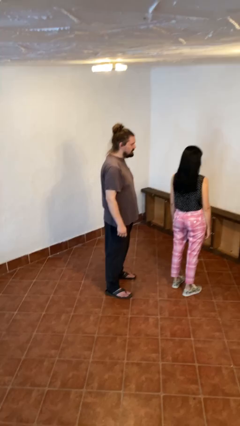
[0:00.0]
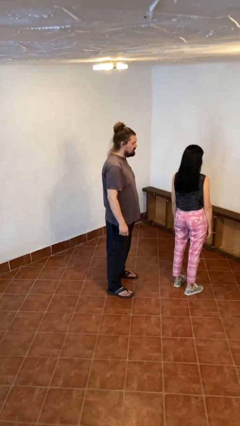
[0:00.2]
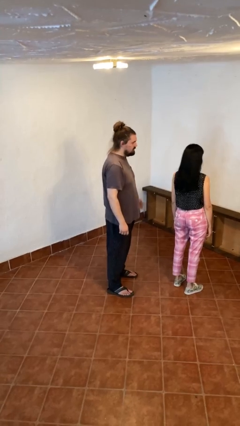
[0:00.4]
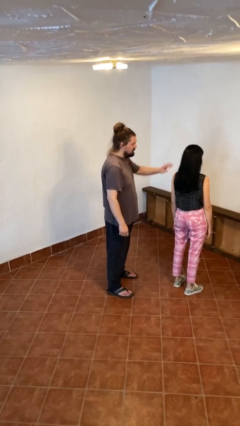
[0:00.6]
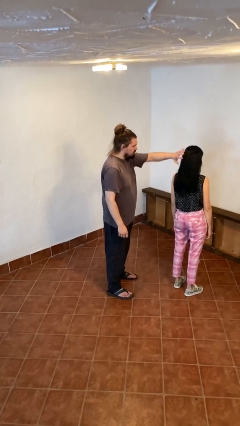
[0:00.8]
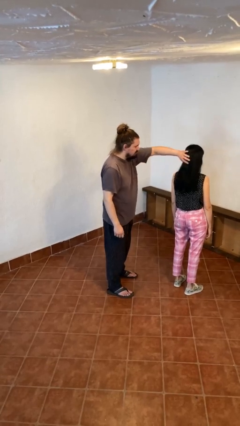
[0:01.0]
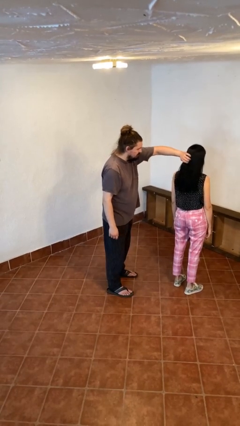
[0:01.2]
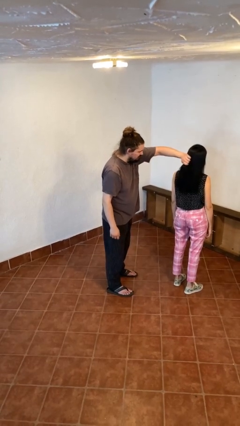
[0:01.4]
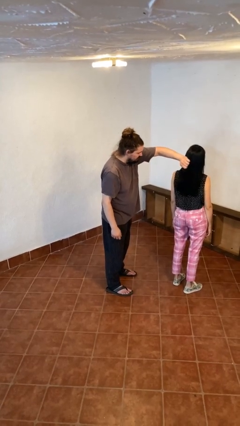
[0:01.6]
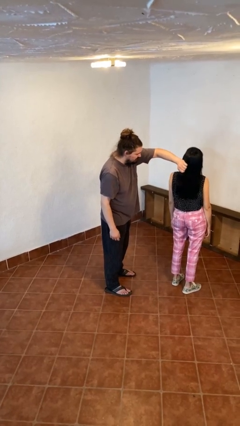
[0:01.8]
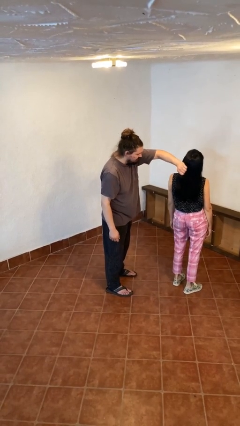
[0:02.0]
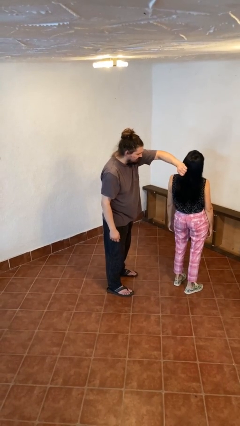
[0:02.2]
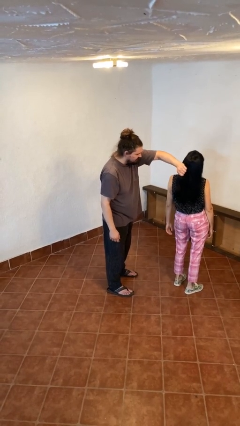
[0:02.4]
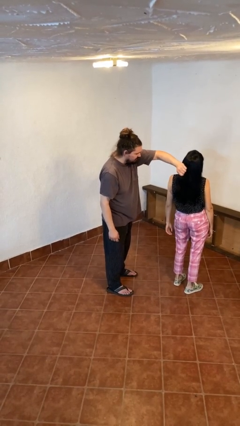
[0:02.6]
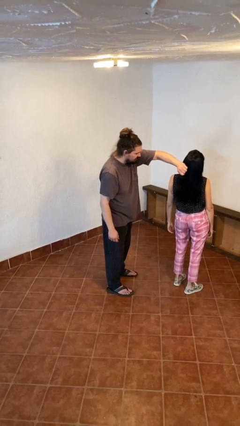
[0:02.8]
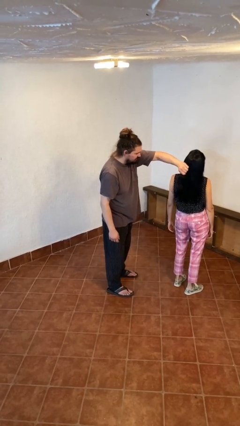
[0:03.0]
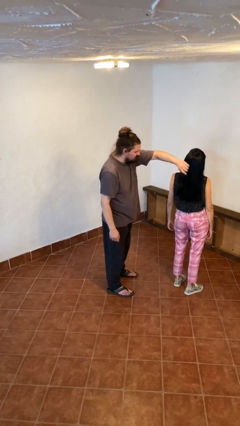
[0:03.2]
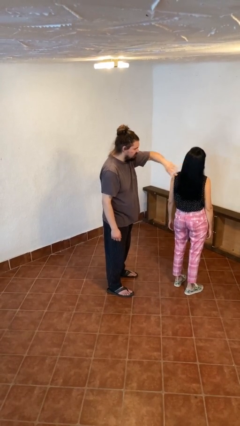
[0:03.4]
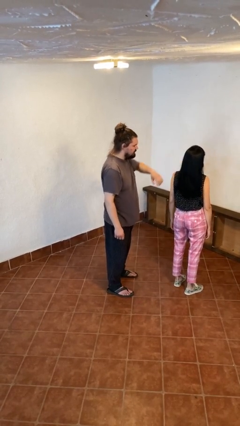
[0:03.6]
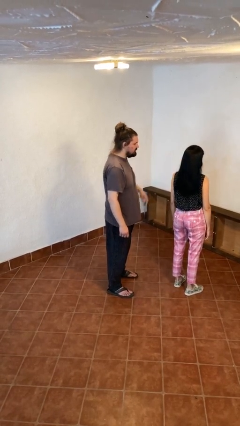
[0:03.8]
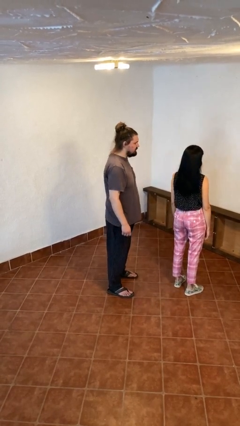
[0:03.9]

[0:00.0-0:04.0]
person grabs person by hair

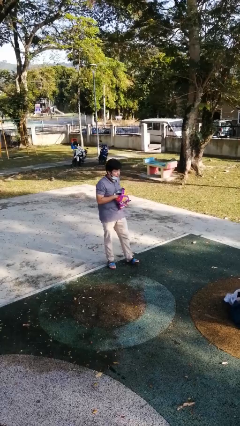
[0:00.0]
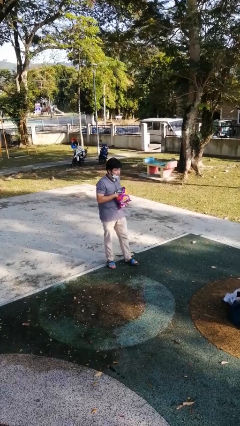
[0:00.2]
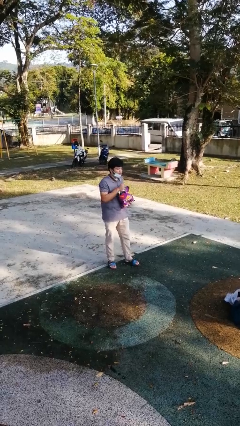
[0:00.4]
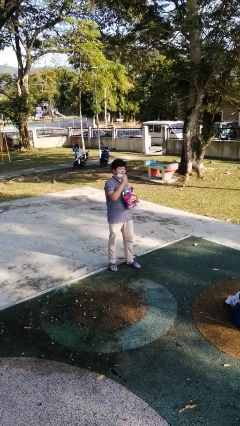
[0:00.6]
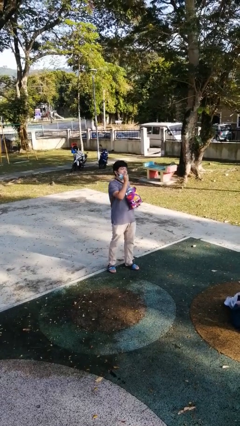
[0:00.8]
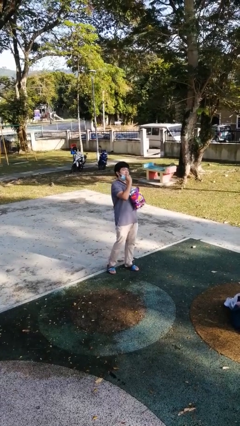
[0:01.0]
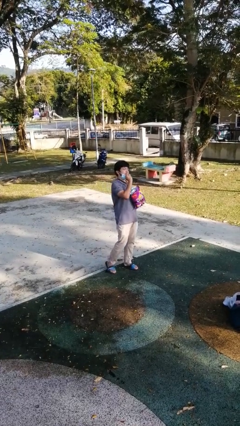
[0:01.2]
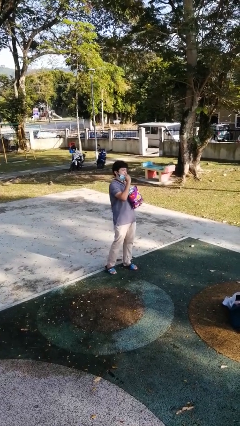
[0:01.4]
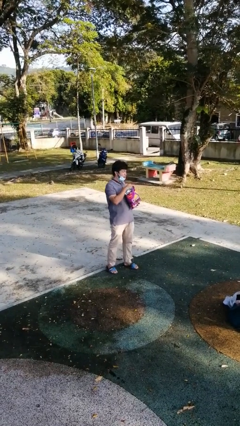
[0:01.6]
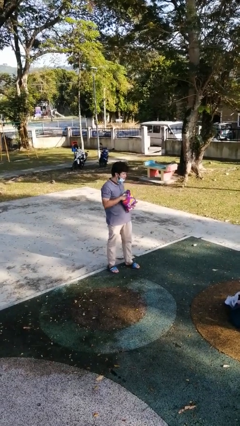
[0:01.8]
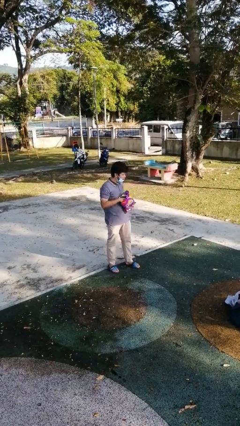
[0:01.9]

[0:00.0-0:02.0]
person eats snack from bag

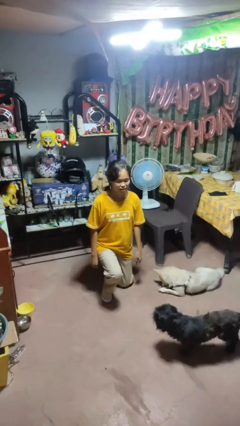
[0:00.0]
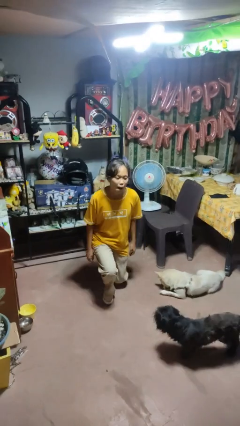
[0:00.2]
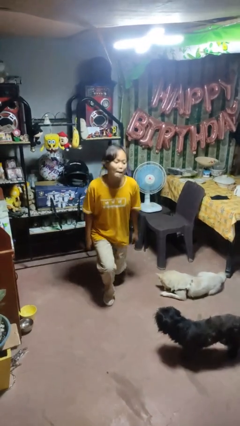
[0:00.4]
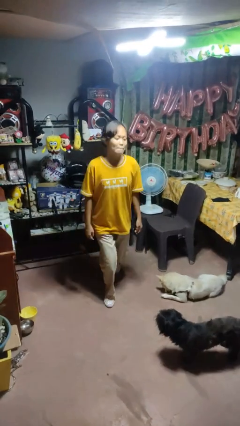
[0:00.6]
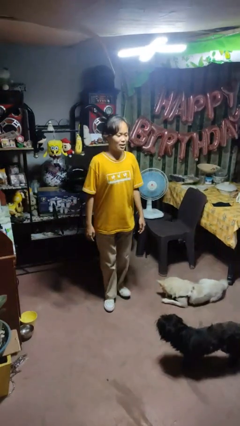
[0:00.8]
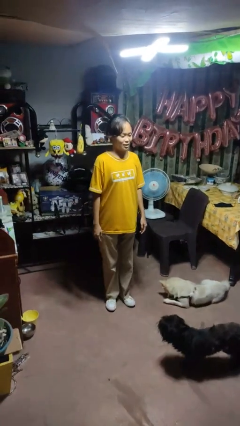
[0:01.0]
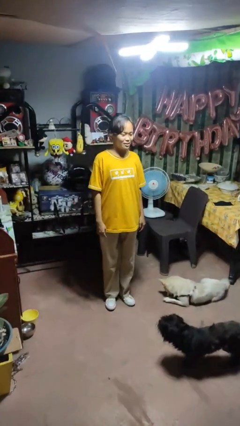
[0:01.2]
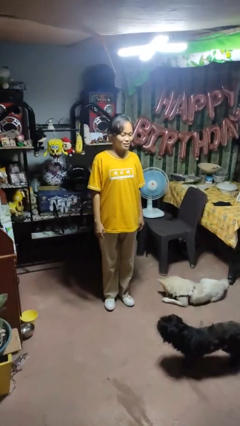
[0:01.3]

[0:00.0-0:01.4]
person stands up from floor

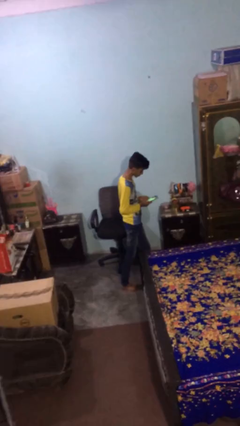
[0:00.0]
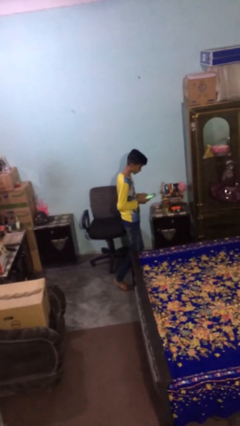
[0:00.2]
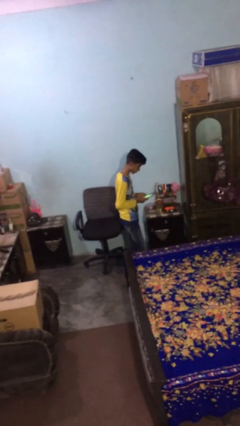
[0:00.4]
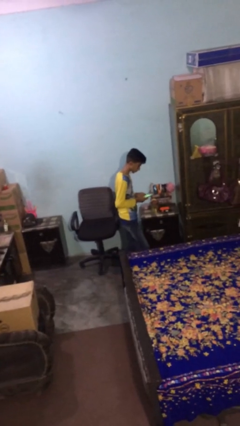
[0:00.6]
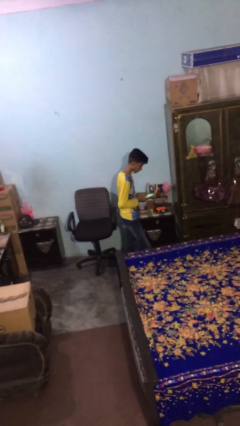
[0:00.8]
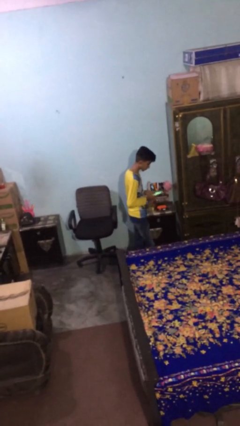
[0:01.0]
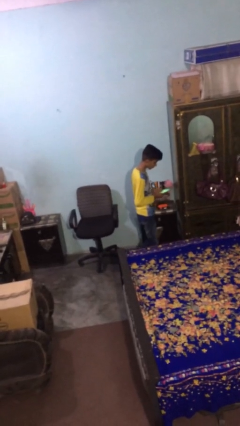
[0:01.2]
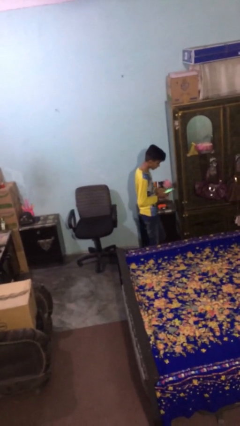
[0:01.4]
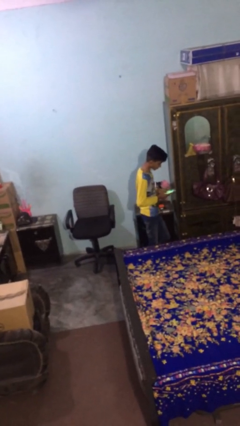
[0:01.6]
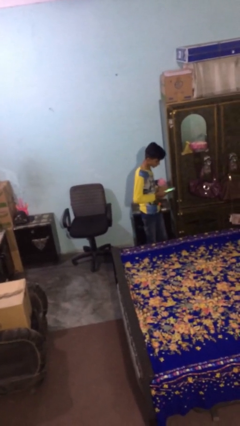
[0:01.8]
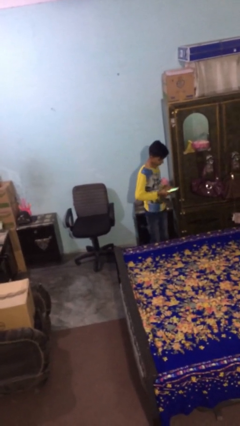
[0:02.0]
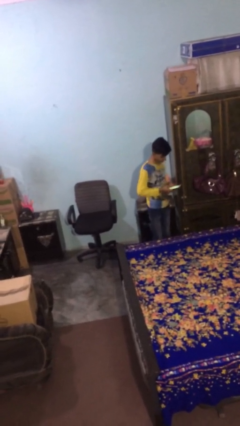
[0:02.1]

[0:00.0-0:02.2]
person talks on phone

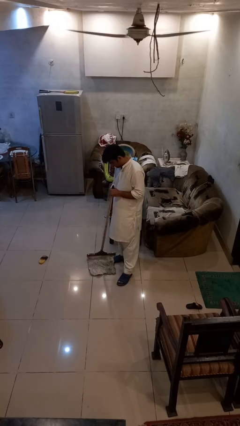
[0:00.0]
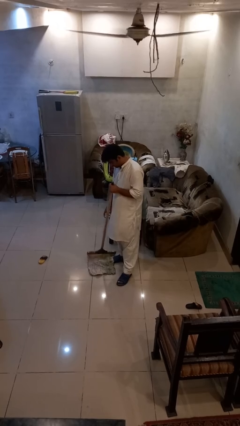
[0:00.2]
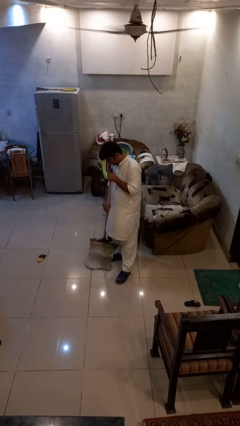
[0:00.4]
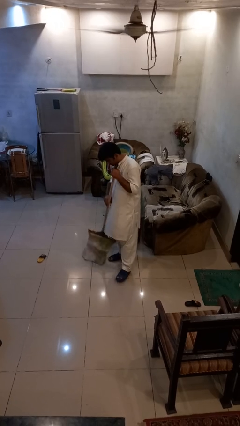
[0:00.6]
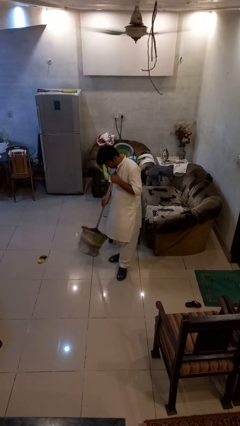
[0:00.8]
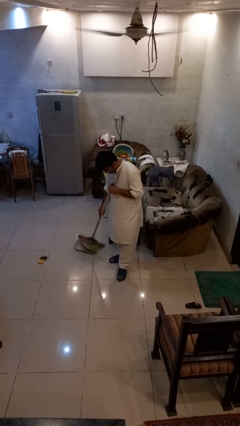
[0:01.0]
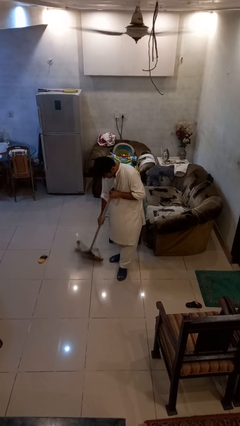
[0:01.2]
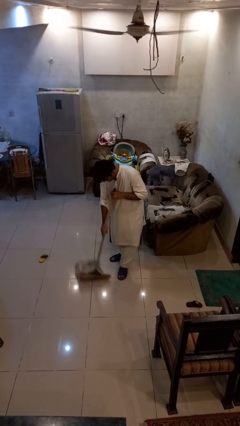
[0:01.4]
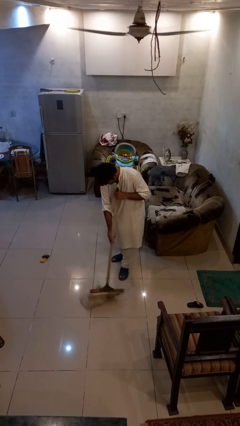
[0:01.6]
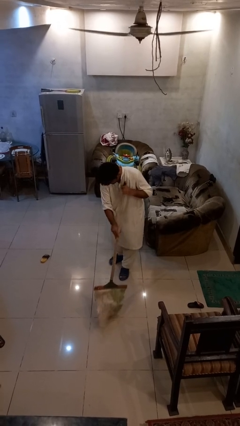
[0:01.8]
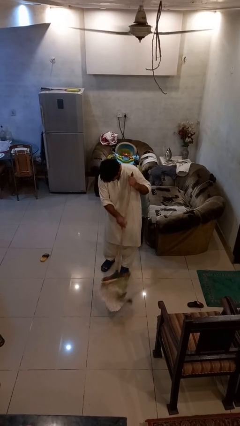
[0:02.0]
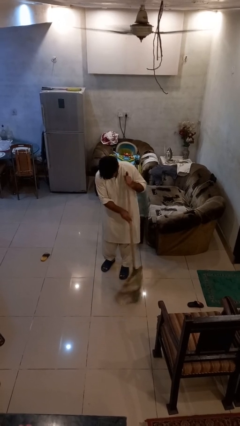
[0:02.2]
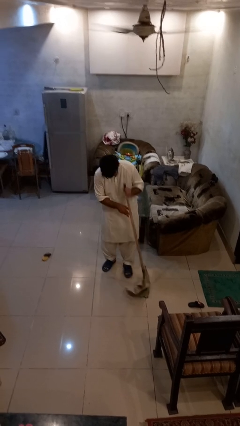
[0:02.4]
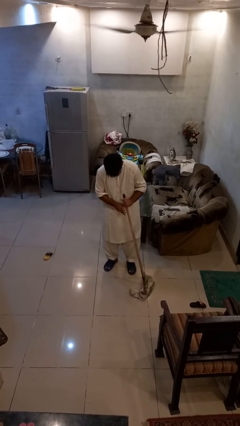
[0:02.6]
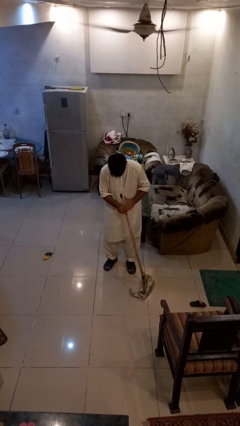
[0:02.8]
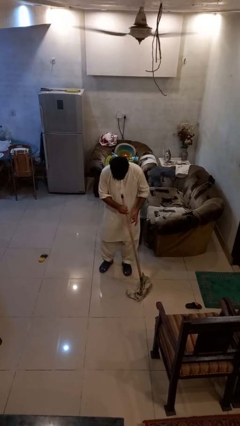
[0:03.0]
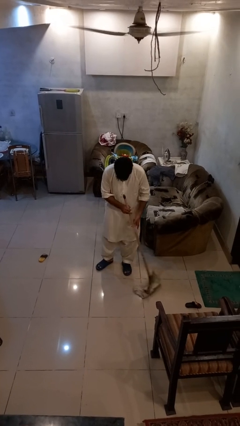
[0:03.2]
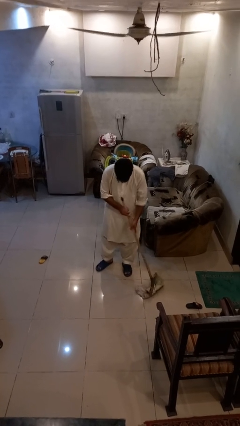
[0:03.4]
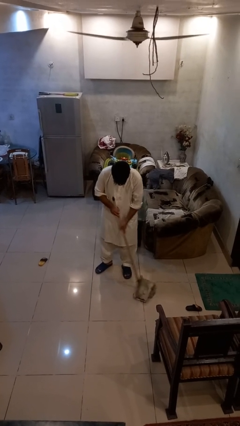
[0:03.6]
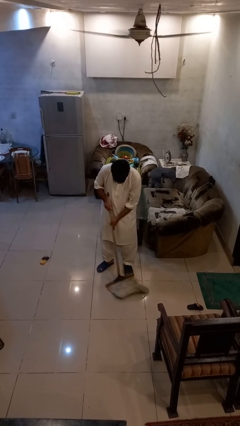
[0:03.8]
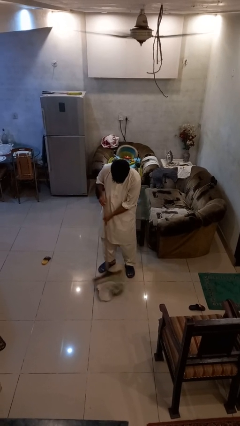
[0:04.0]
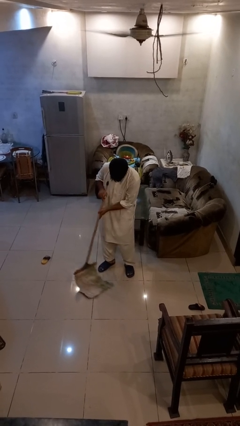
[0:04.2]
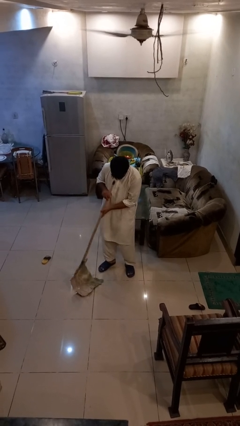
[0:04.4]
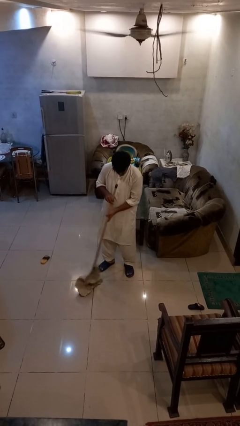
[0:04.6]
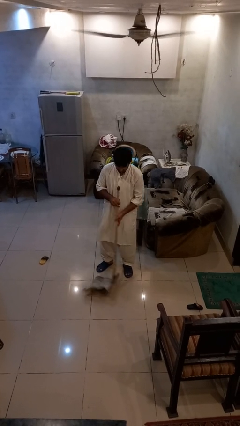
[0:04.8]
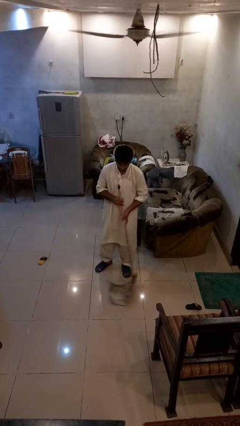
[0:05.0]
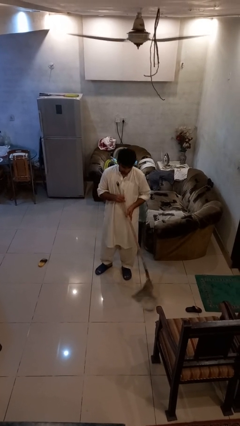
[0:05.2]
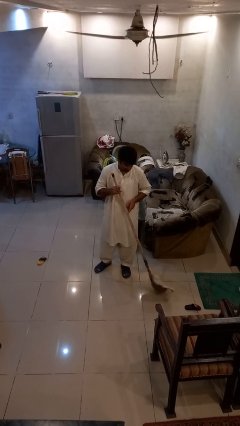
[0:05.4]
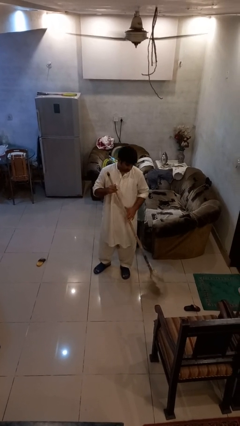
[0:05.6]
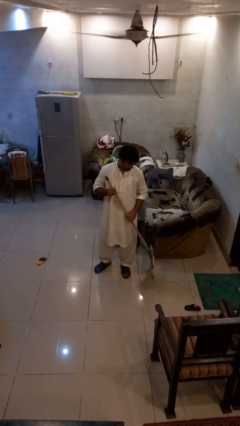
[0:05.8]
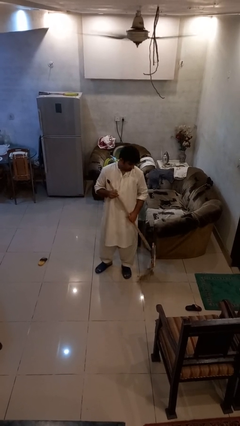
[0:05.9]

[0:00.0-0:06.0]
person mops

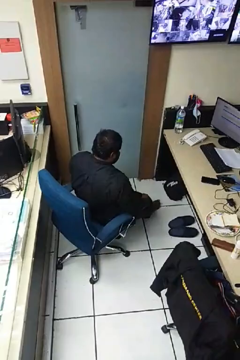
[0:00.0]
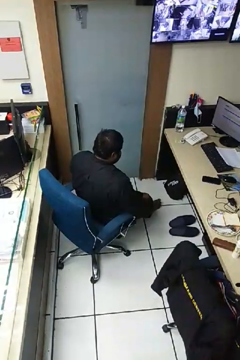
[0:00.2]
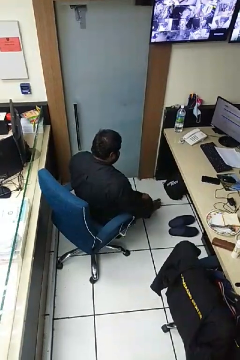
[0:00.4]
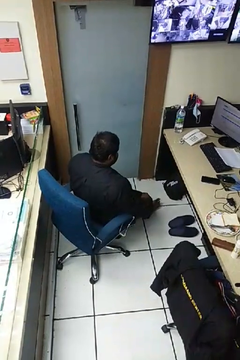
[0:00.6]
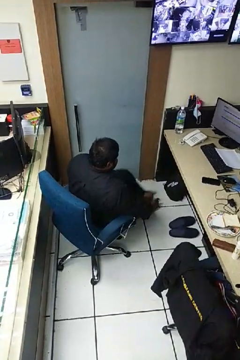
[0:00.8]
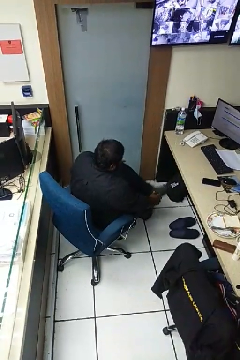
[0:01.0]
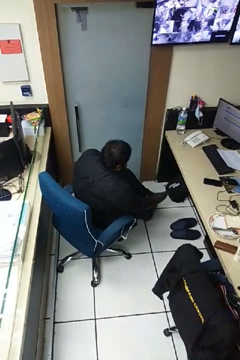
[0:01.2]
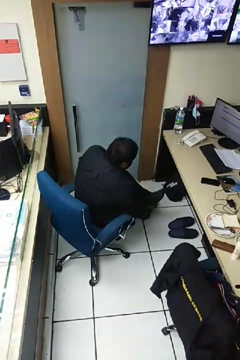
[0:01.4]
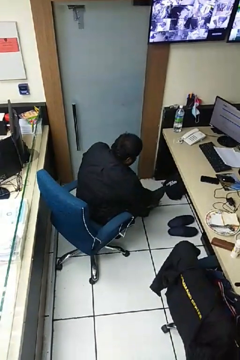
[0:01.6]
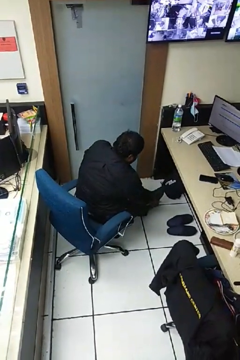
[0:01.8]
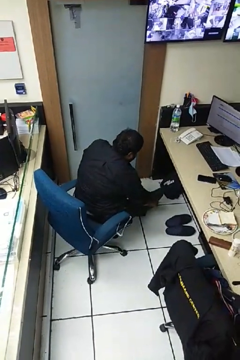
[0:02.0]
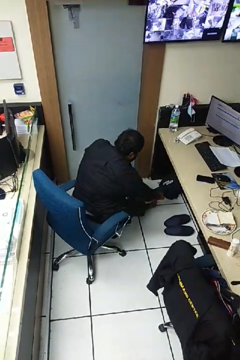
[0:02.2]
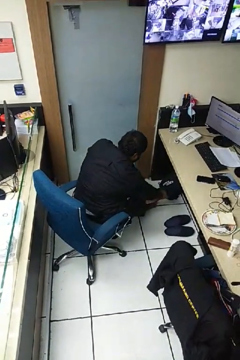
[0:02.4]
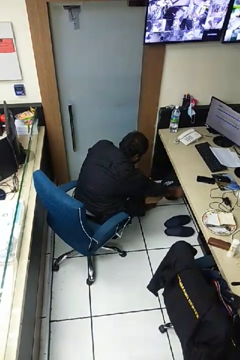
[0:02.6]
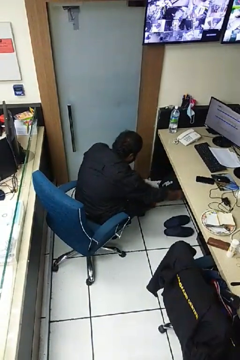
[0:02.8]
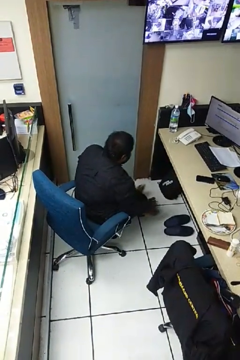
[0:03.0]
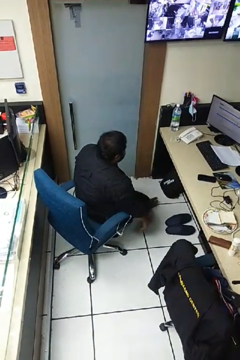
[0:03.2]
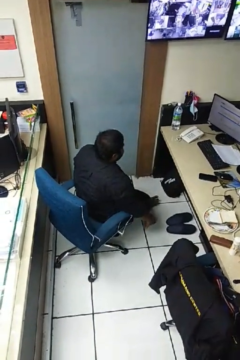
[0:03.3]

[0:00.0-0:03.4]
person takes off socks
